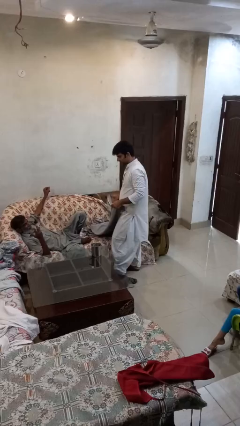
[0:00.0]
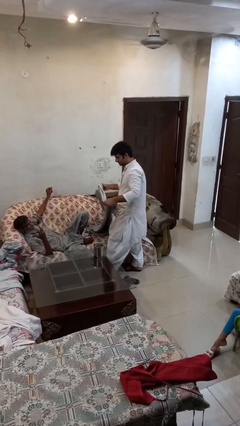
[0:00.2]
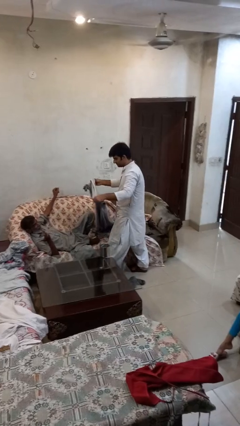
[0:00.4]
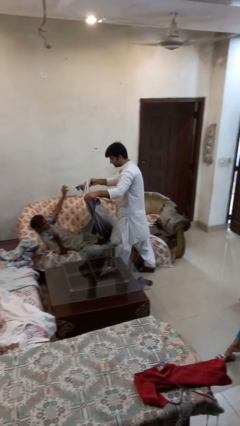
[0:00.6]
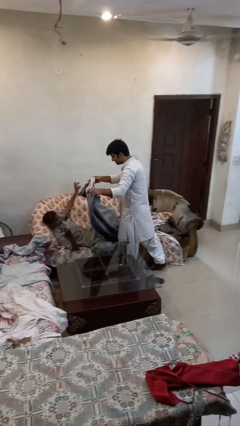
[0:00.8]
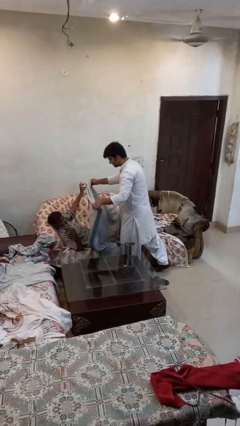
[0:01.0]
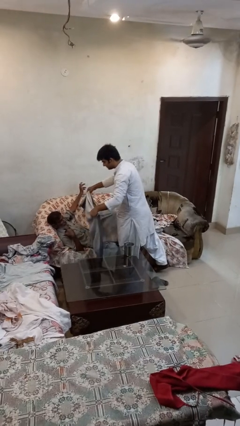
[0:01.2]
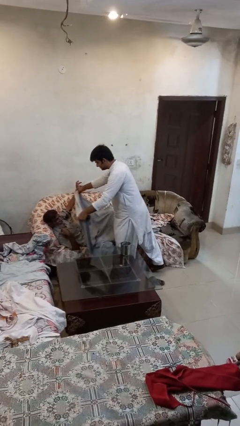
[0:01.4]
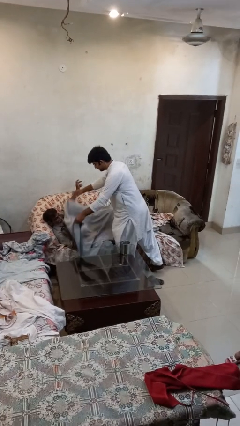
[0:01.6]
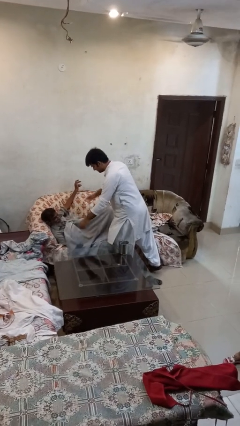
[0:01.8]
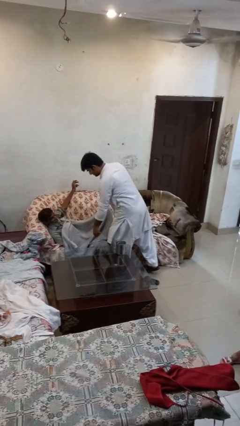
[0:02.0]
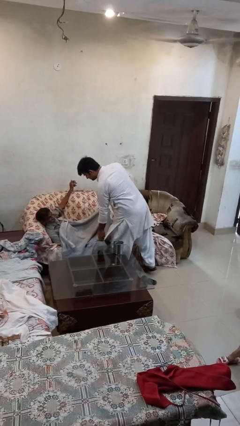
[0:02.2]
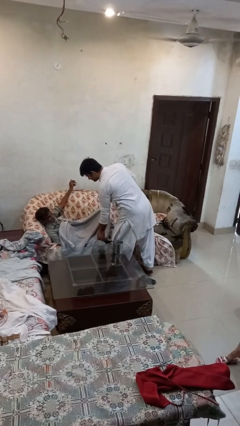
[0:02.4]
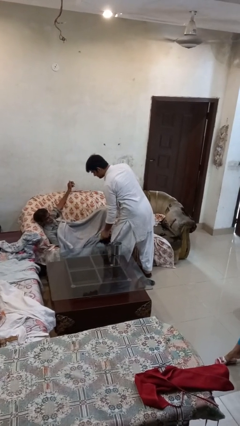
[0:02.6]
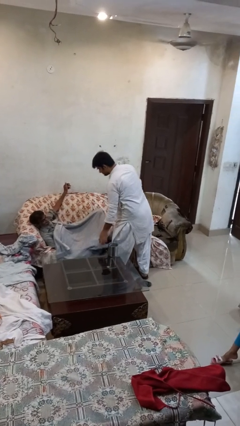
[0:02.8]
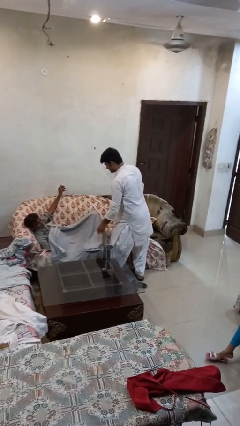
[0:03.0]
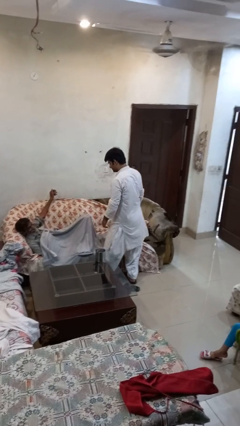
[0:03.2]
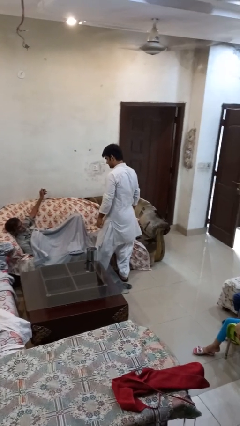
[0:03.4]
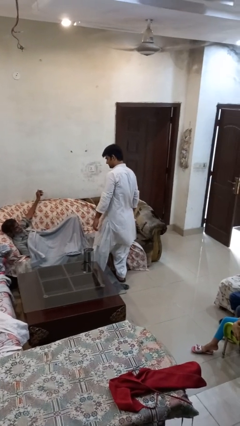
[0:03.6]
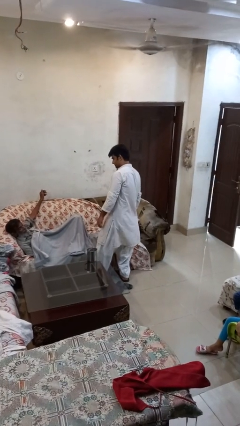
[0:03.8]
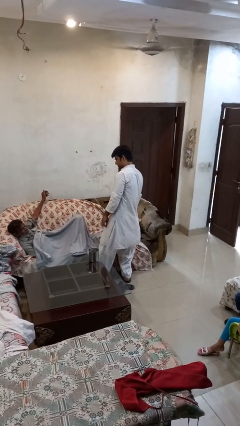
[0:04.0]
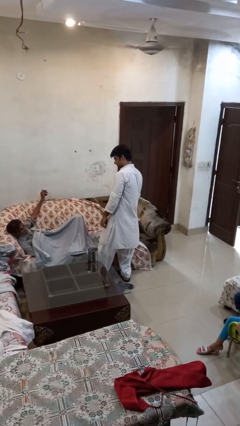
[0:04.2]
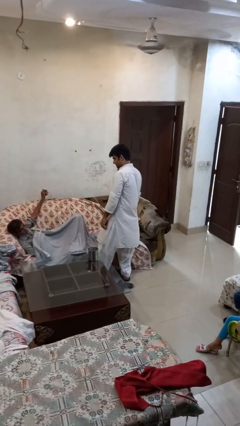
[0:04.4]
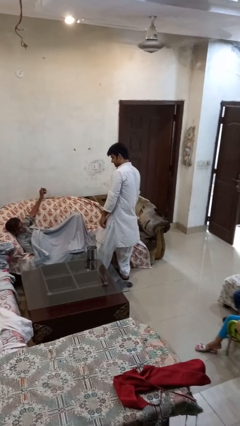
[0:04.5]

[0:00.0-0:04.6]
person covers friend with blanket

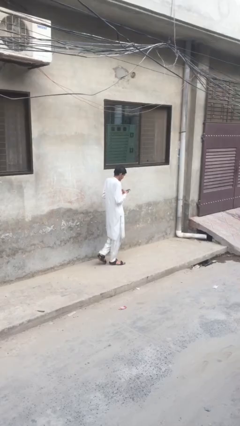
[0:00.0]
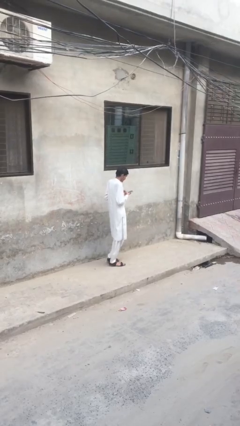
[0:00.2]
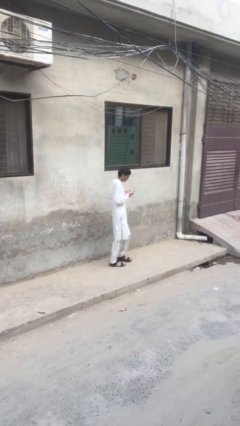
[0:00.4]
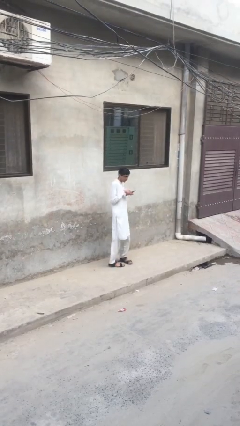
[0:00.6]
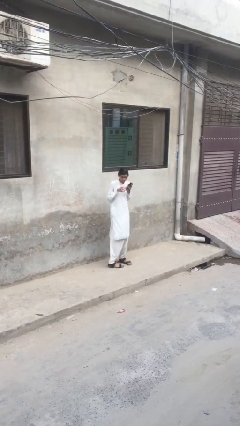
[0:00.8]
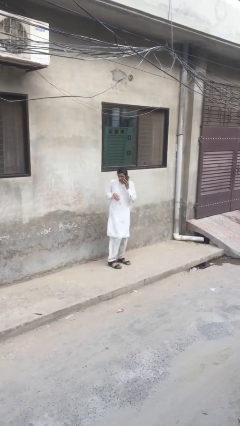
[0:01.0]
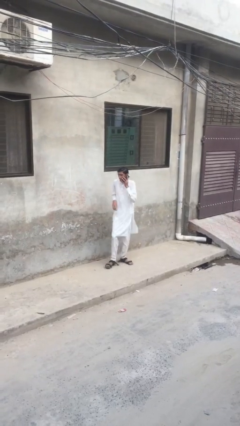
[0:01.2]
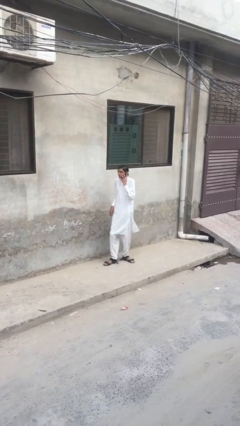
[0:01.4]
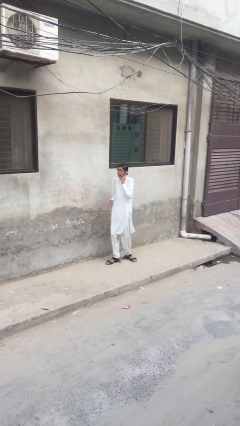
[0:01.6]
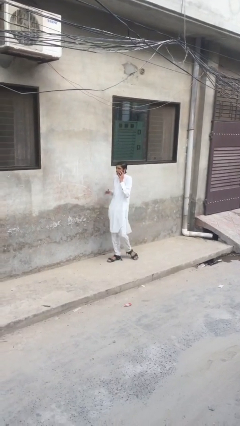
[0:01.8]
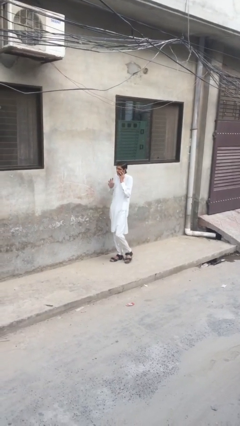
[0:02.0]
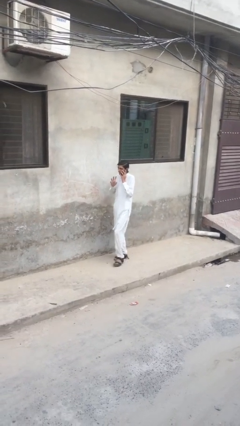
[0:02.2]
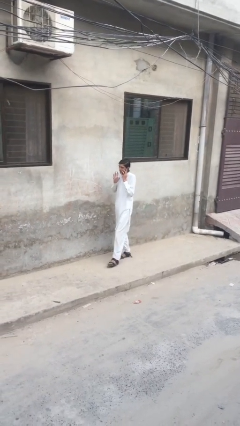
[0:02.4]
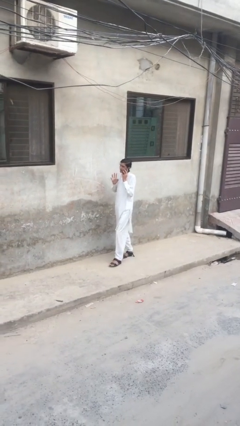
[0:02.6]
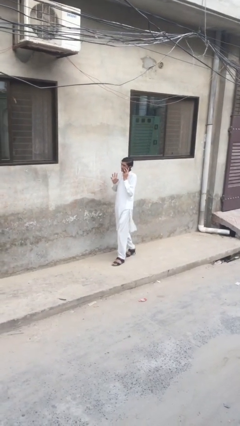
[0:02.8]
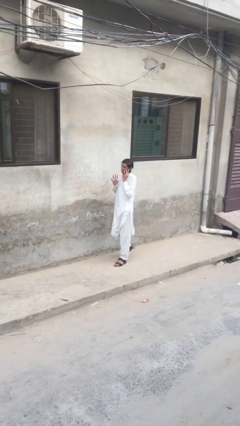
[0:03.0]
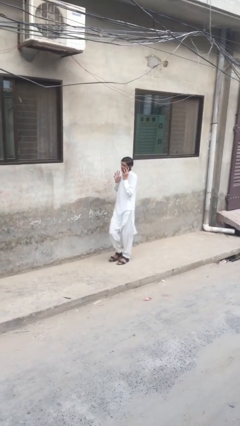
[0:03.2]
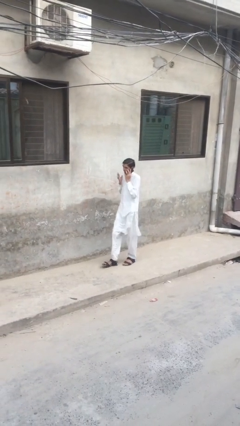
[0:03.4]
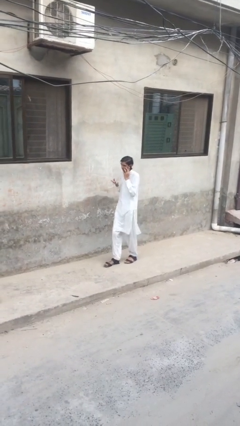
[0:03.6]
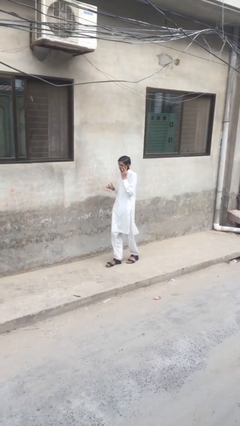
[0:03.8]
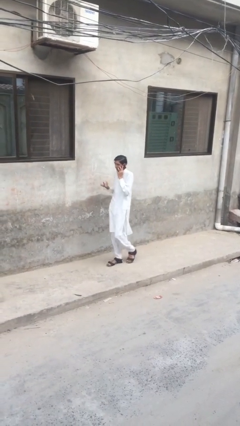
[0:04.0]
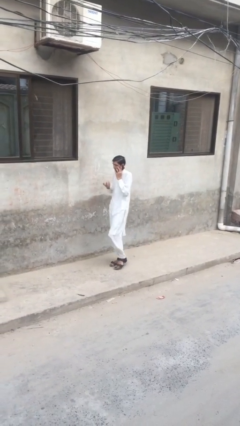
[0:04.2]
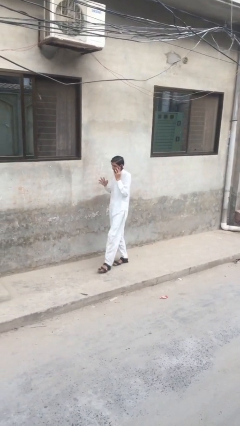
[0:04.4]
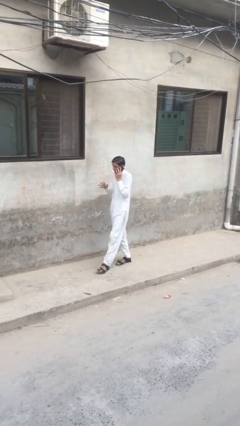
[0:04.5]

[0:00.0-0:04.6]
person talks on phone

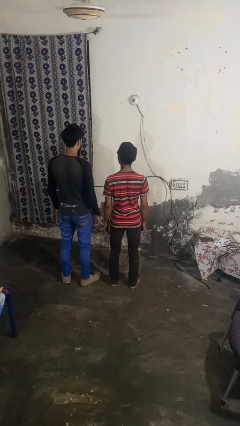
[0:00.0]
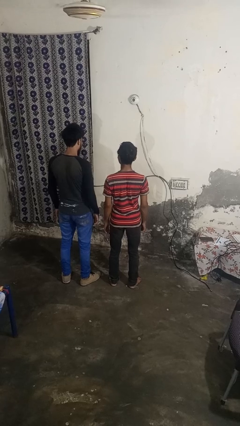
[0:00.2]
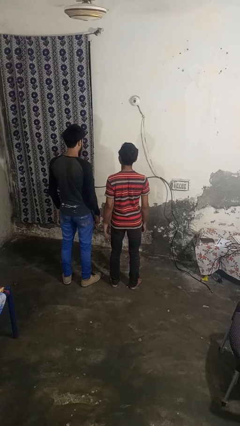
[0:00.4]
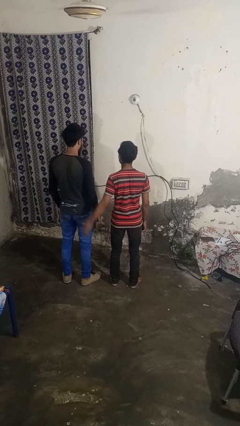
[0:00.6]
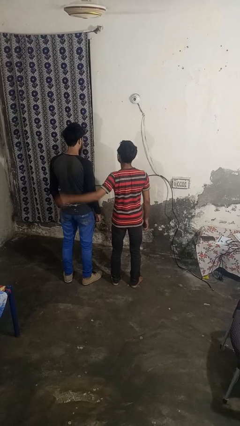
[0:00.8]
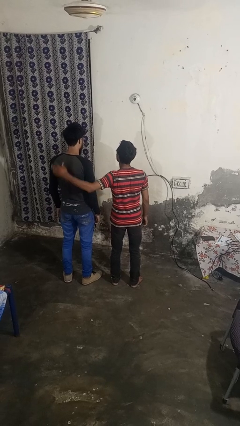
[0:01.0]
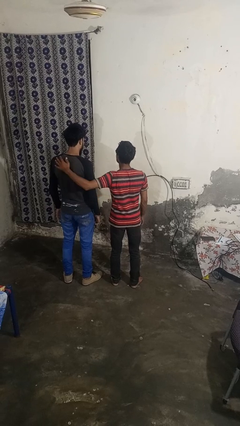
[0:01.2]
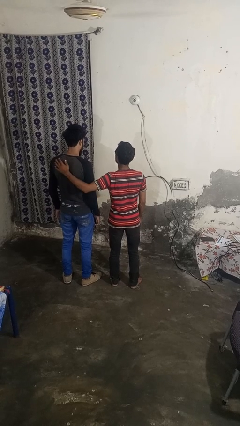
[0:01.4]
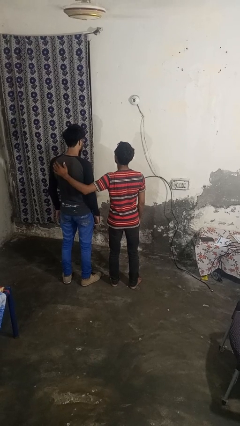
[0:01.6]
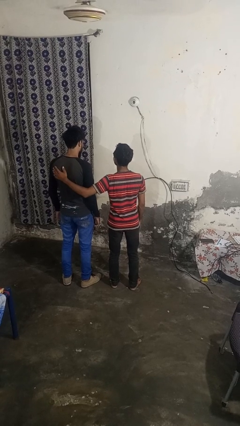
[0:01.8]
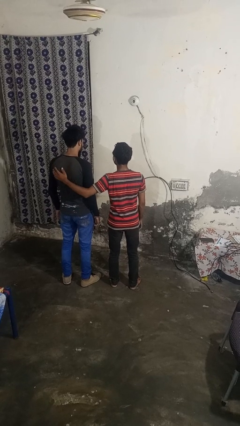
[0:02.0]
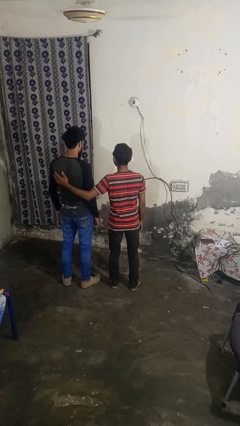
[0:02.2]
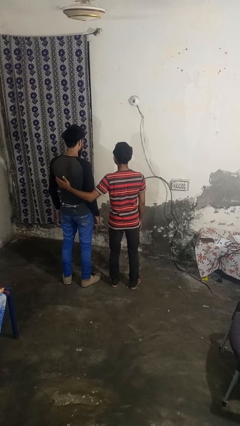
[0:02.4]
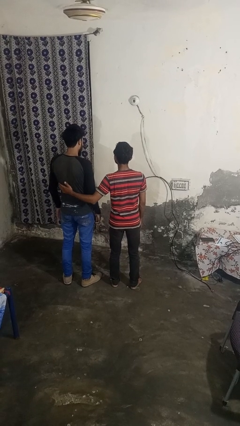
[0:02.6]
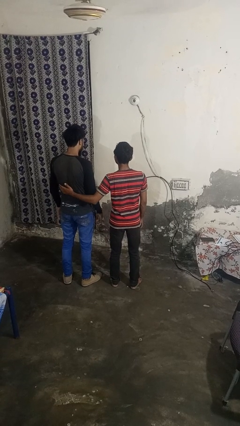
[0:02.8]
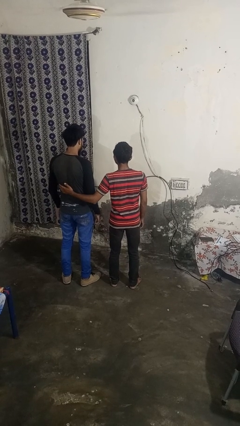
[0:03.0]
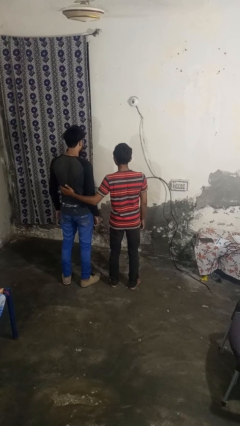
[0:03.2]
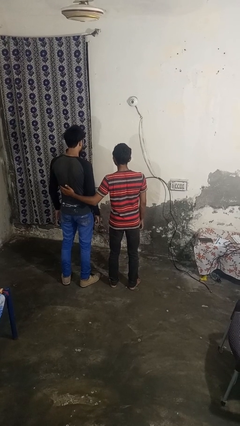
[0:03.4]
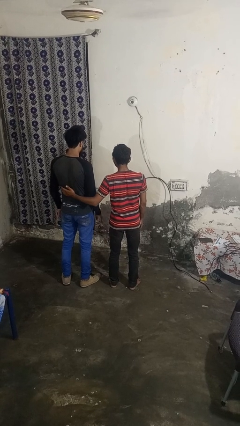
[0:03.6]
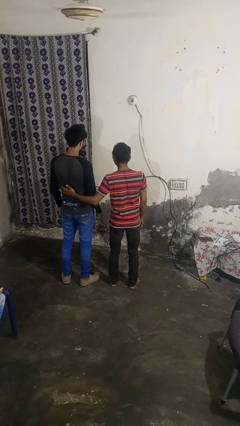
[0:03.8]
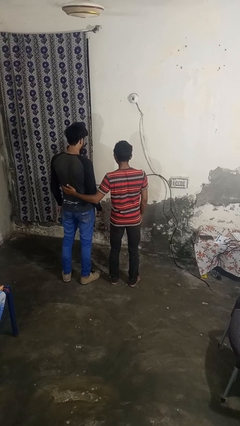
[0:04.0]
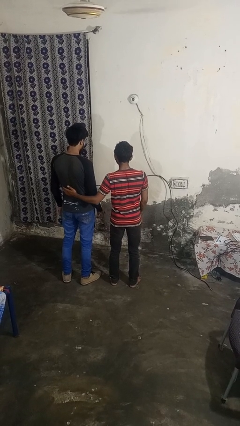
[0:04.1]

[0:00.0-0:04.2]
person touches back of person

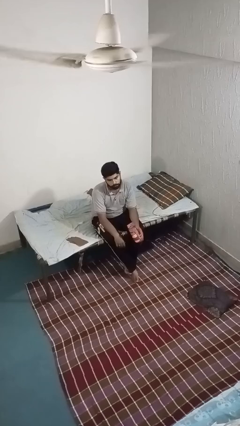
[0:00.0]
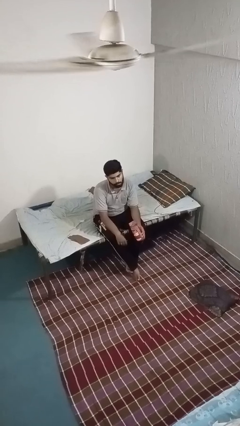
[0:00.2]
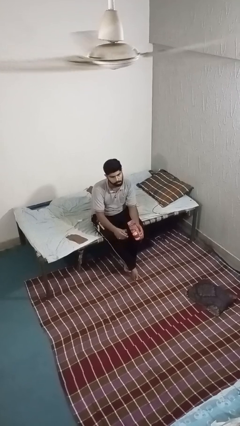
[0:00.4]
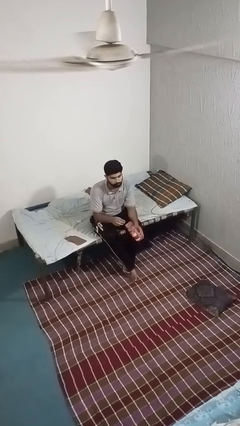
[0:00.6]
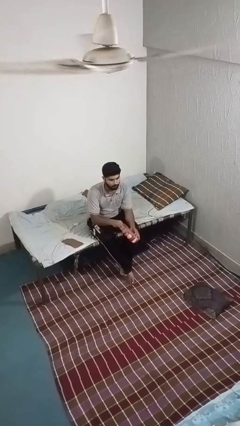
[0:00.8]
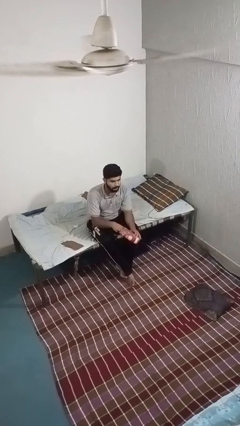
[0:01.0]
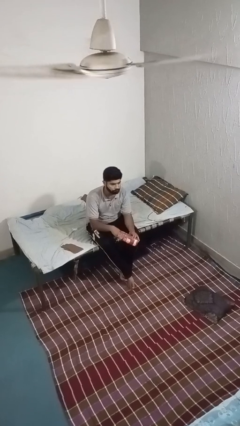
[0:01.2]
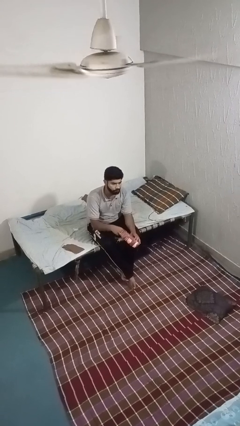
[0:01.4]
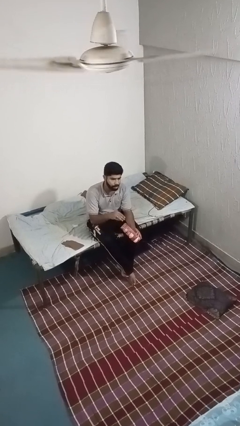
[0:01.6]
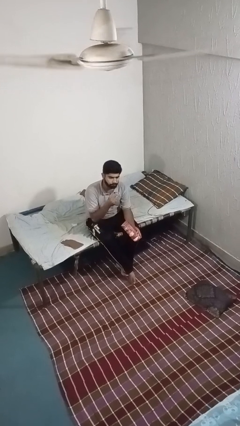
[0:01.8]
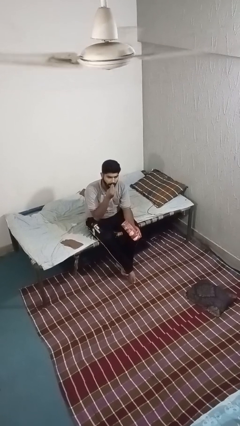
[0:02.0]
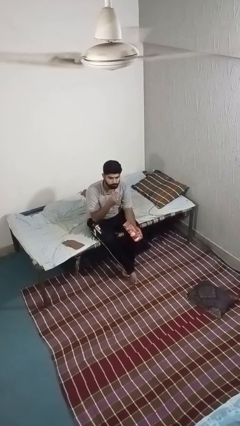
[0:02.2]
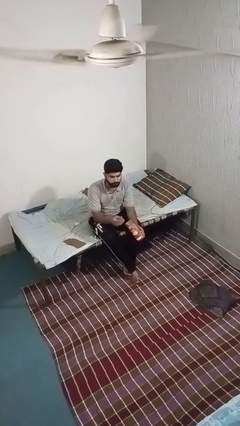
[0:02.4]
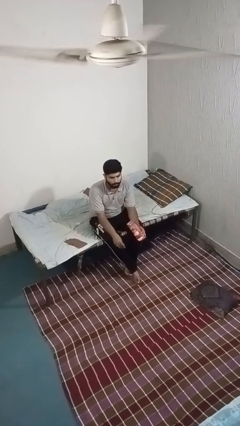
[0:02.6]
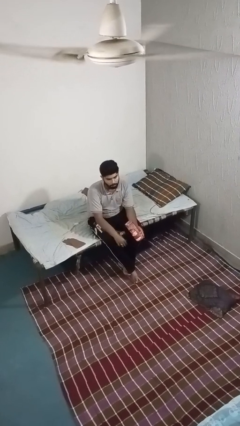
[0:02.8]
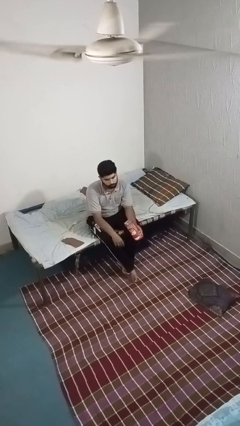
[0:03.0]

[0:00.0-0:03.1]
person eats snack from bag

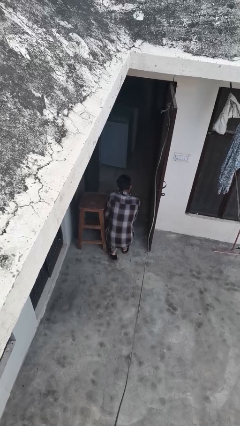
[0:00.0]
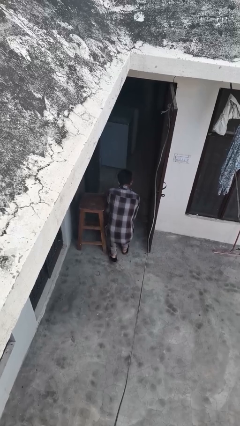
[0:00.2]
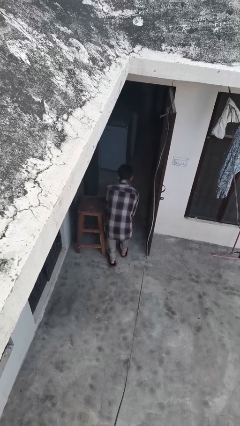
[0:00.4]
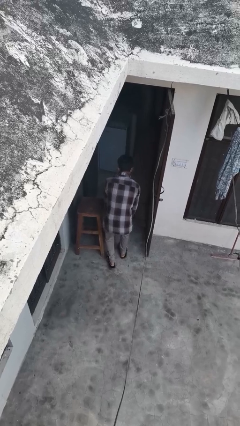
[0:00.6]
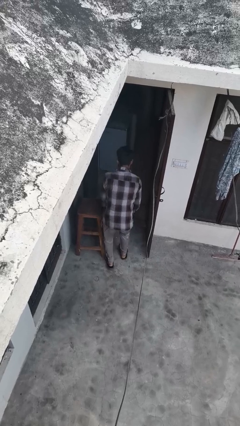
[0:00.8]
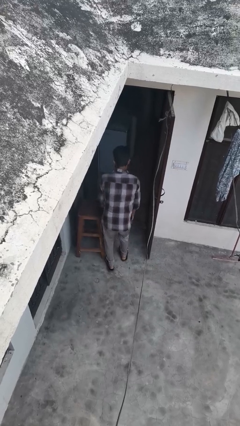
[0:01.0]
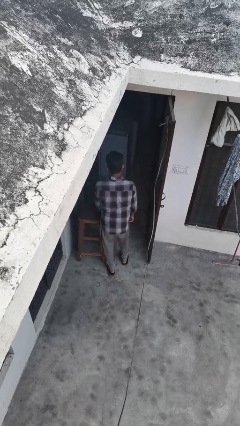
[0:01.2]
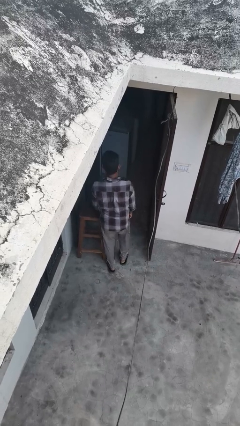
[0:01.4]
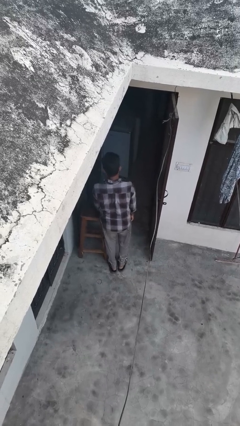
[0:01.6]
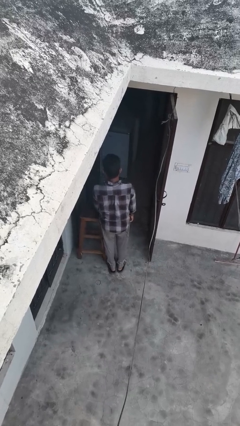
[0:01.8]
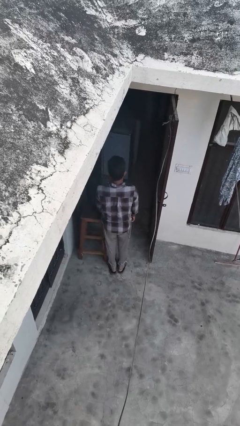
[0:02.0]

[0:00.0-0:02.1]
person stands up from floor
